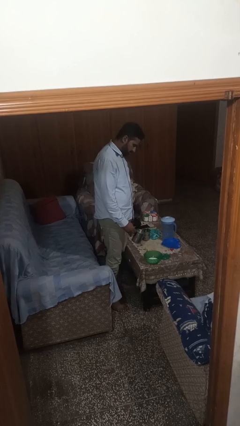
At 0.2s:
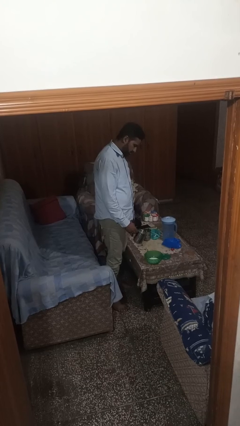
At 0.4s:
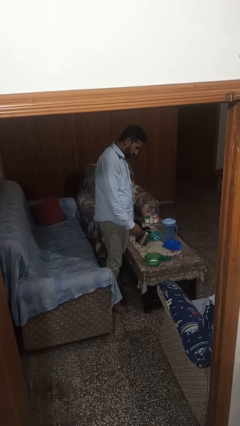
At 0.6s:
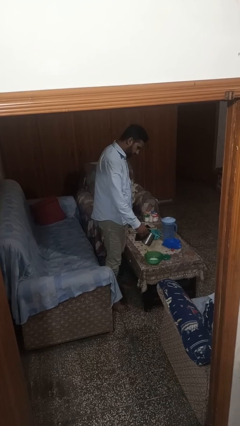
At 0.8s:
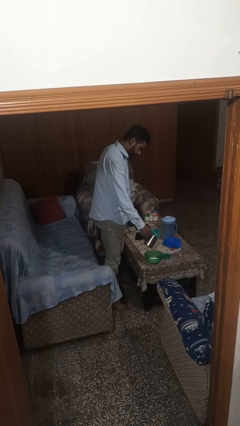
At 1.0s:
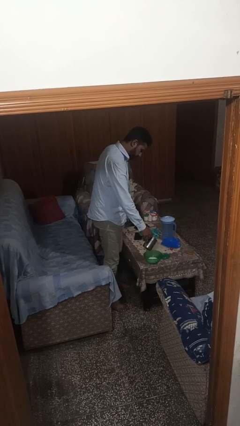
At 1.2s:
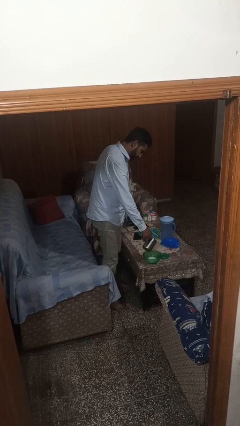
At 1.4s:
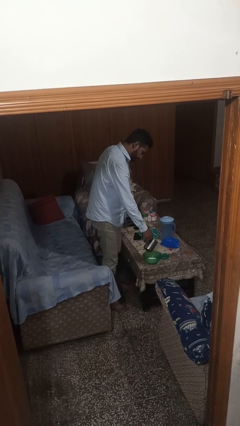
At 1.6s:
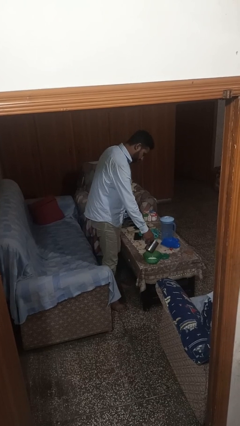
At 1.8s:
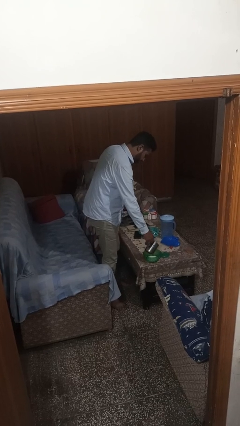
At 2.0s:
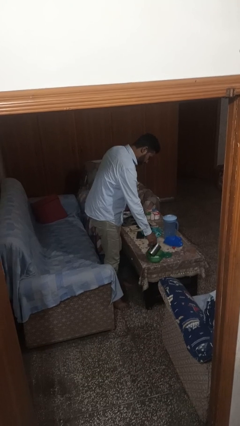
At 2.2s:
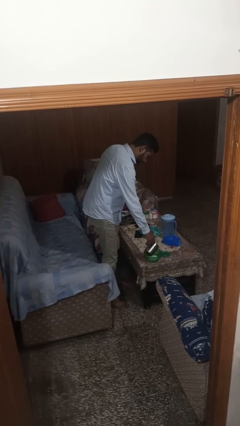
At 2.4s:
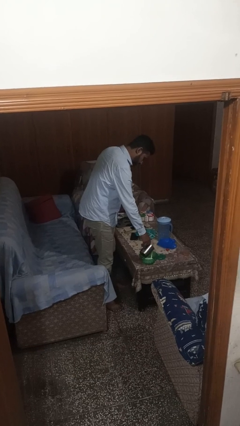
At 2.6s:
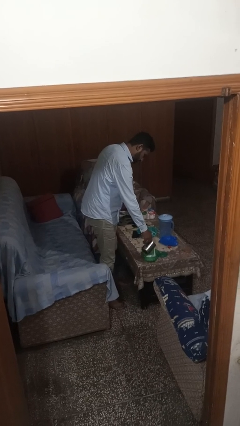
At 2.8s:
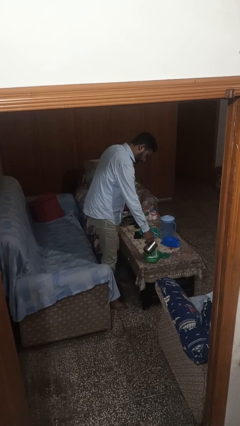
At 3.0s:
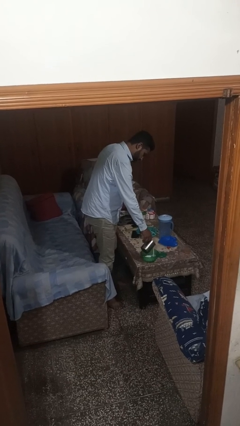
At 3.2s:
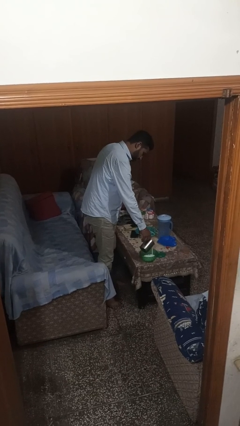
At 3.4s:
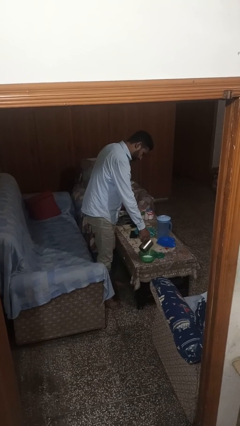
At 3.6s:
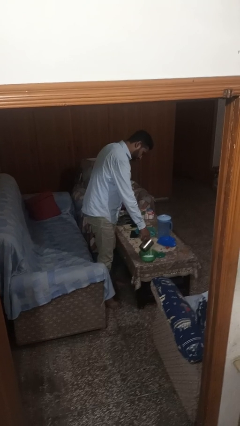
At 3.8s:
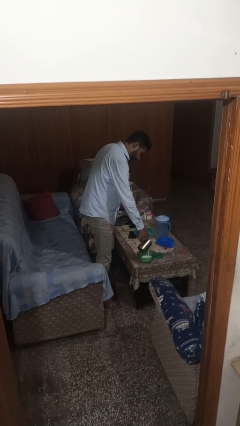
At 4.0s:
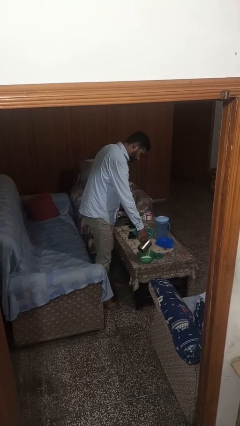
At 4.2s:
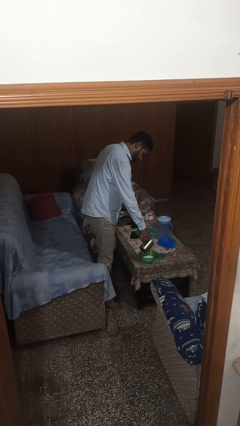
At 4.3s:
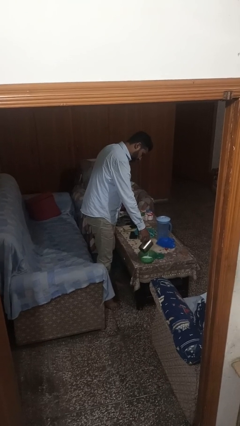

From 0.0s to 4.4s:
person pours into bowl

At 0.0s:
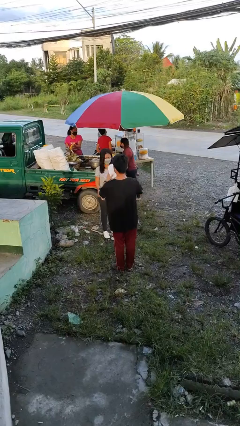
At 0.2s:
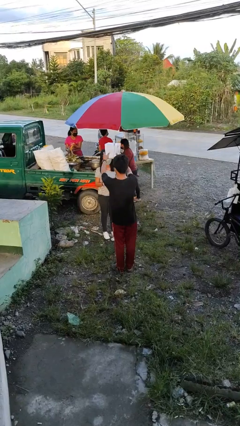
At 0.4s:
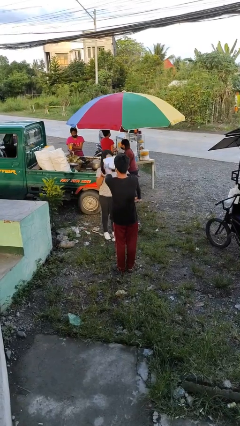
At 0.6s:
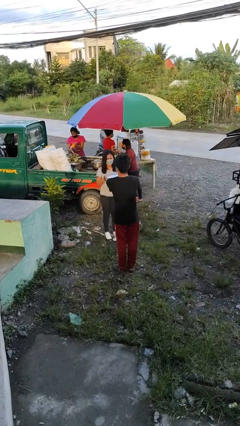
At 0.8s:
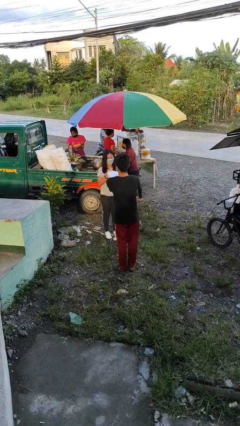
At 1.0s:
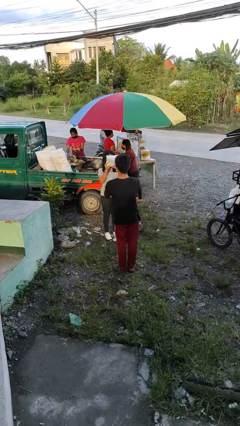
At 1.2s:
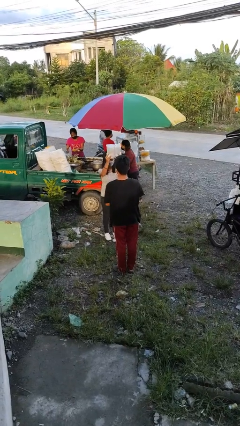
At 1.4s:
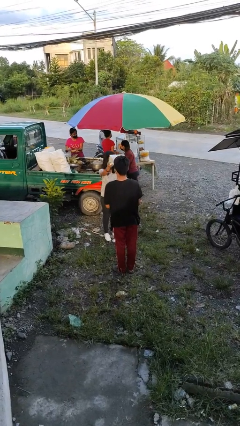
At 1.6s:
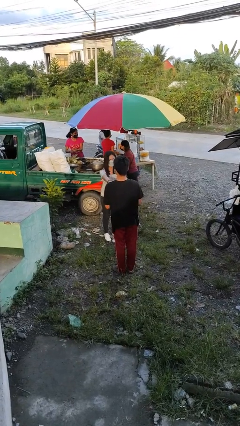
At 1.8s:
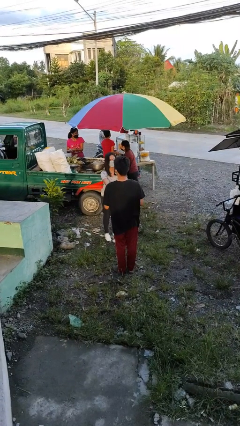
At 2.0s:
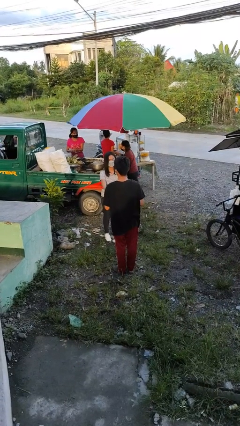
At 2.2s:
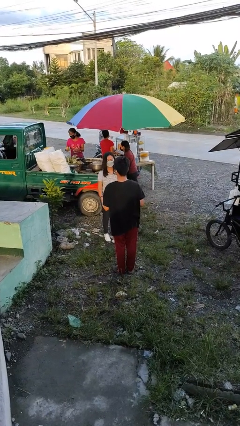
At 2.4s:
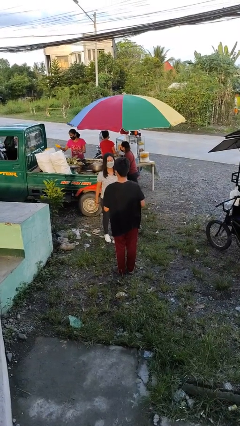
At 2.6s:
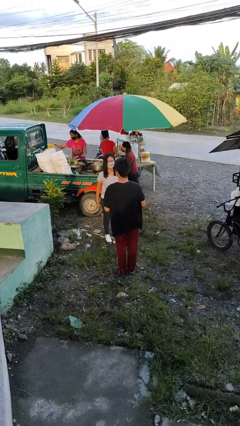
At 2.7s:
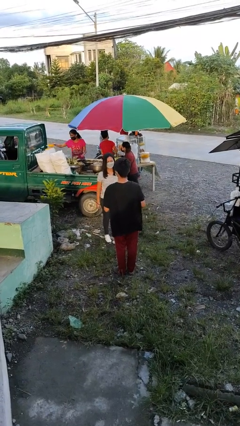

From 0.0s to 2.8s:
person transfers object to person

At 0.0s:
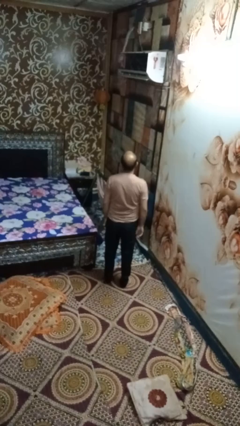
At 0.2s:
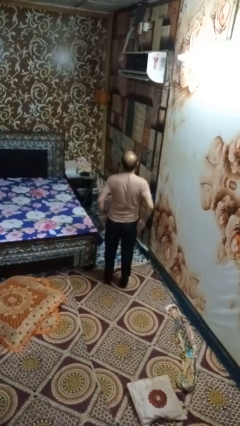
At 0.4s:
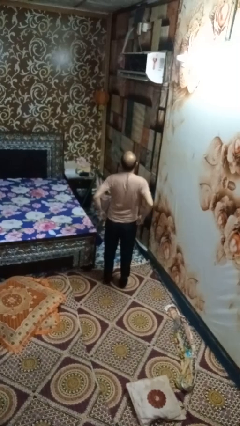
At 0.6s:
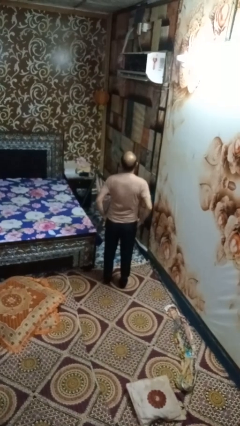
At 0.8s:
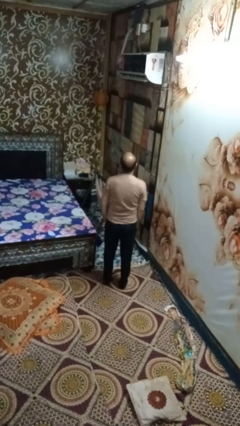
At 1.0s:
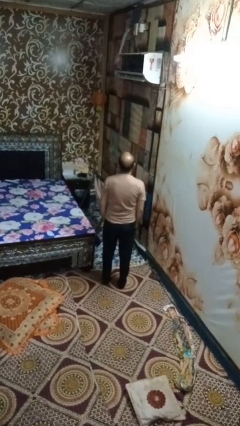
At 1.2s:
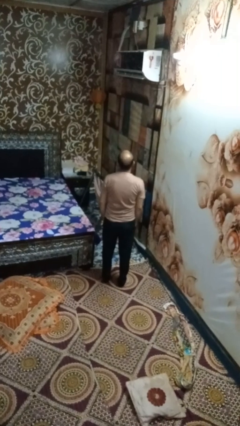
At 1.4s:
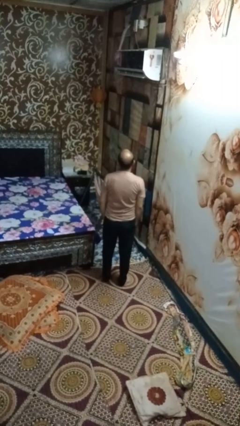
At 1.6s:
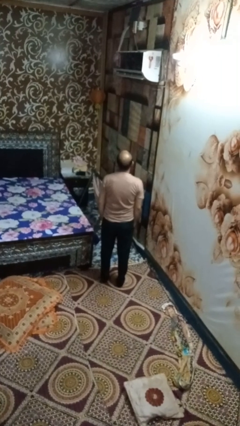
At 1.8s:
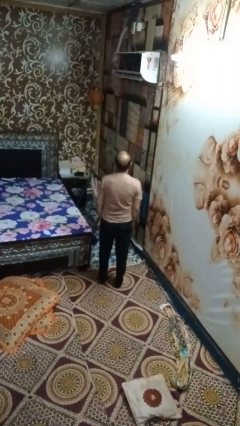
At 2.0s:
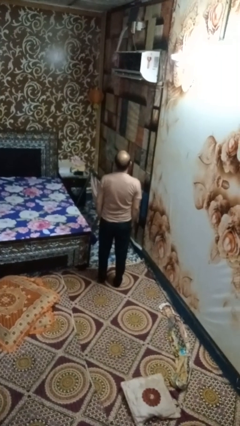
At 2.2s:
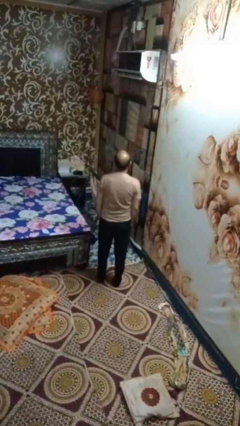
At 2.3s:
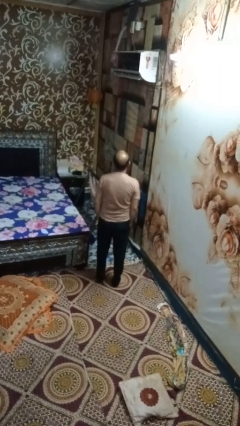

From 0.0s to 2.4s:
person puts hands in back pockets

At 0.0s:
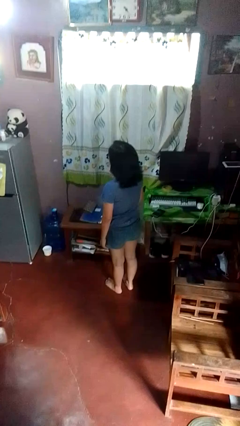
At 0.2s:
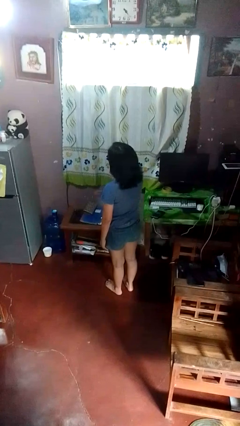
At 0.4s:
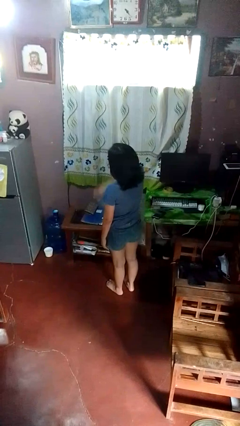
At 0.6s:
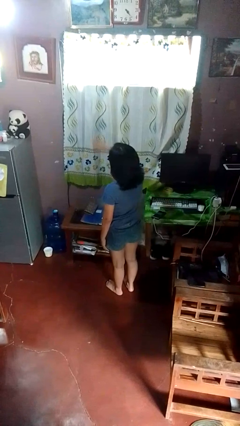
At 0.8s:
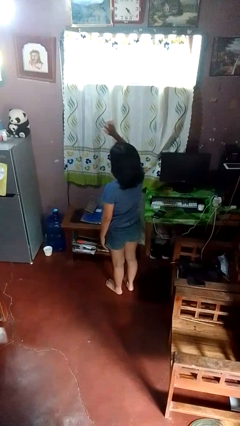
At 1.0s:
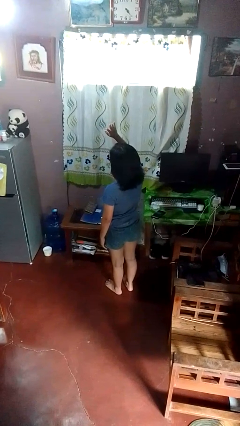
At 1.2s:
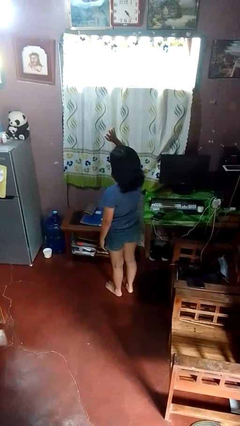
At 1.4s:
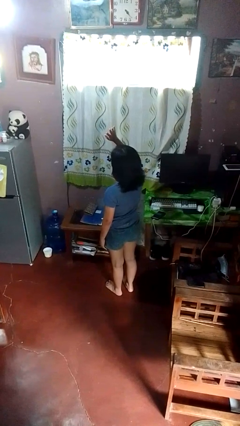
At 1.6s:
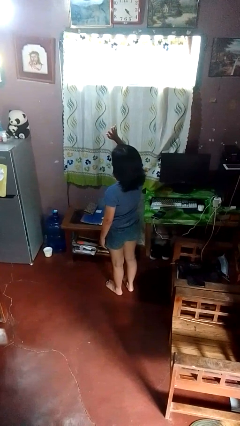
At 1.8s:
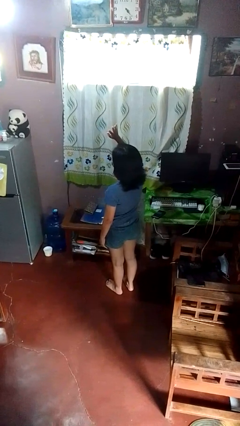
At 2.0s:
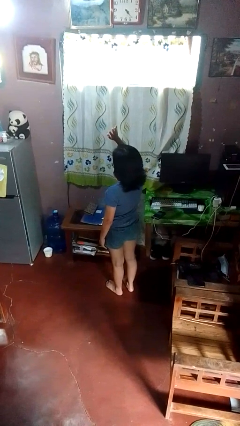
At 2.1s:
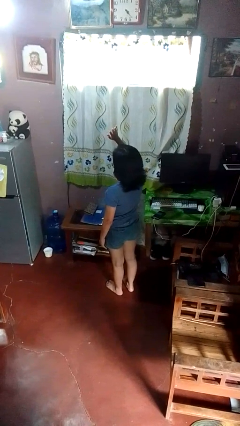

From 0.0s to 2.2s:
person gestures swipe up

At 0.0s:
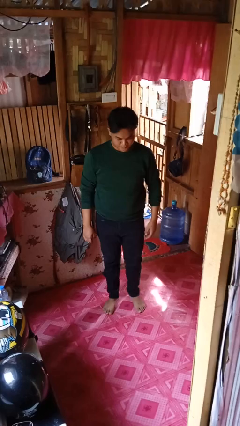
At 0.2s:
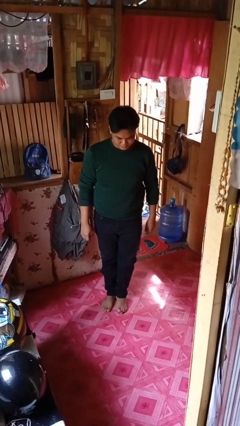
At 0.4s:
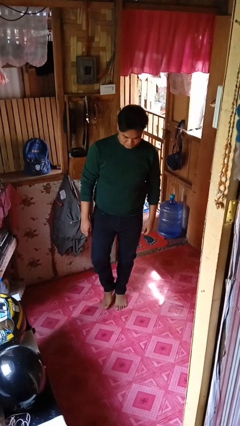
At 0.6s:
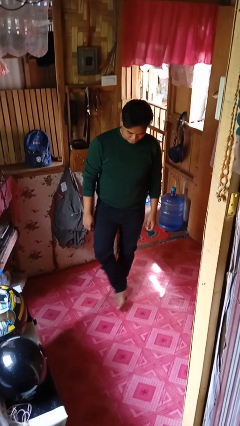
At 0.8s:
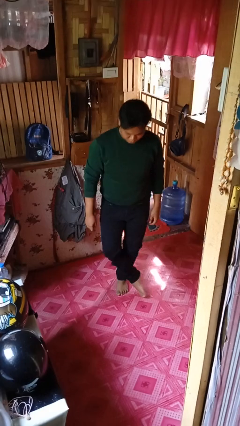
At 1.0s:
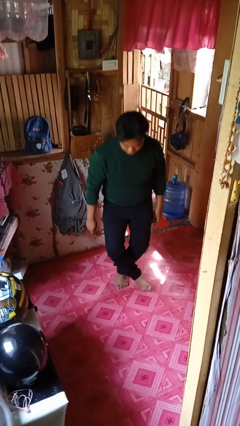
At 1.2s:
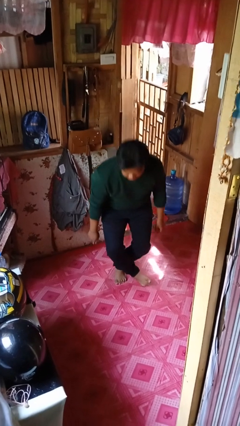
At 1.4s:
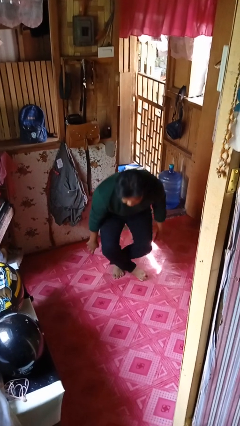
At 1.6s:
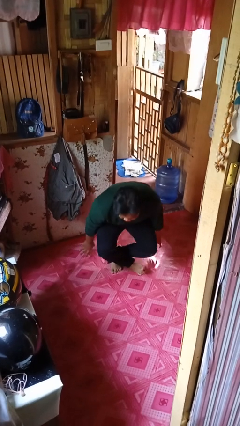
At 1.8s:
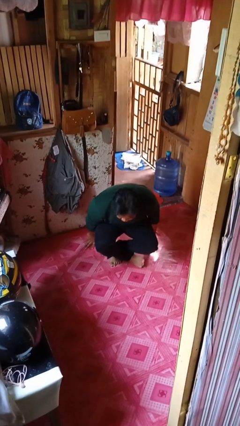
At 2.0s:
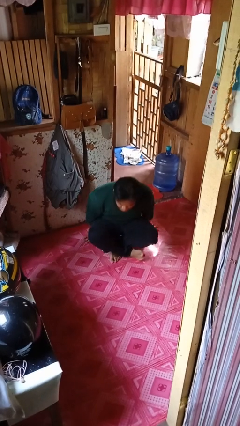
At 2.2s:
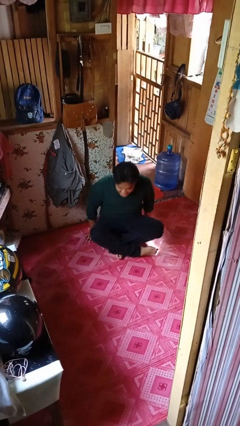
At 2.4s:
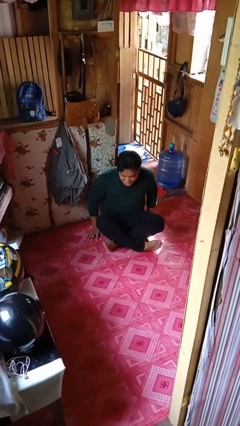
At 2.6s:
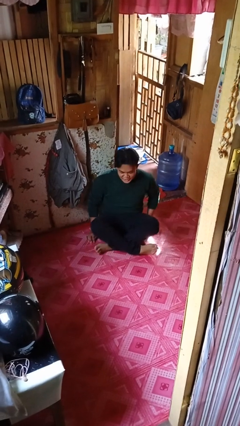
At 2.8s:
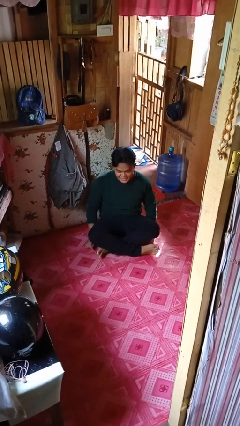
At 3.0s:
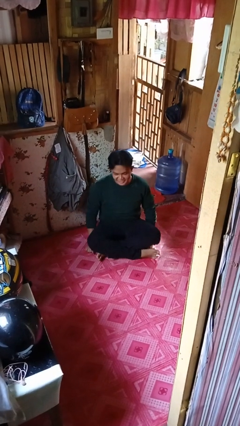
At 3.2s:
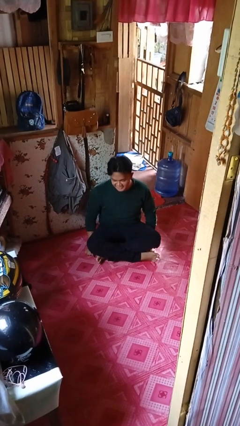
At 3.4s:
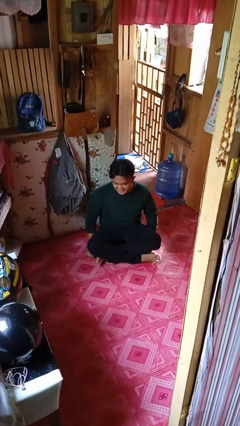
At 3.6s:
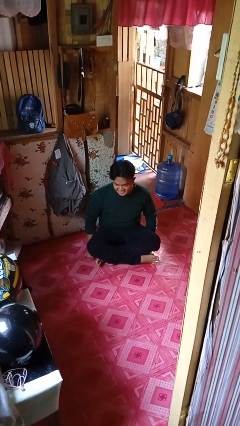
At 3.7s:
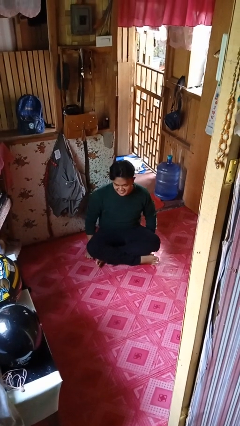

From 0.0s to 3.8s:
person sits crisscross

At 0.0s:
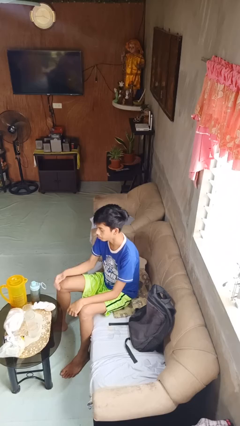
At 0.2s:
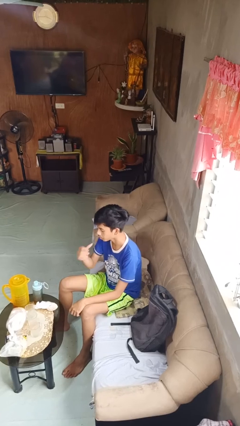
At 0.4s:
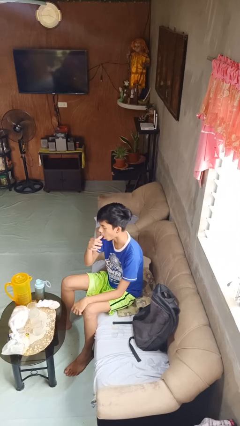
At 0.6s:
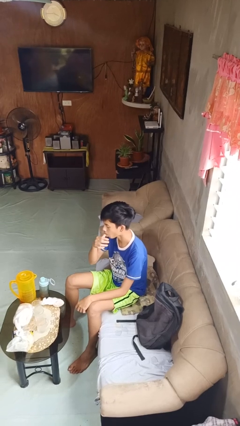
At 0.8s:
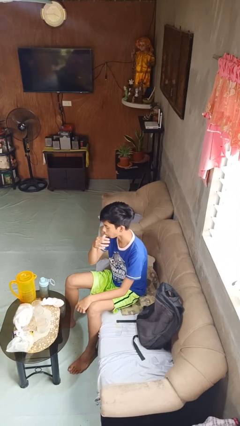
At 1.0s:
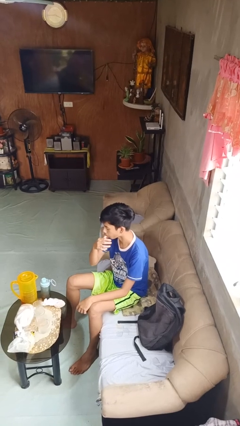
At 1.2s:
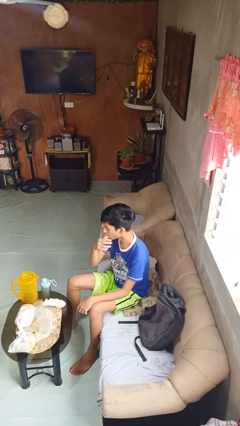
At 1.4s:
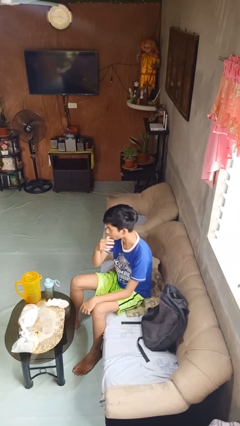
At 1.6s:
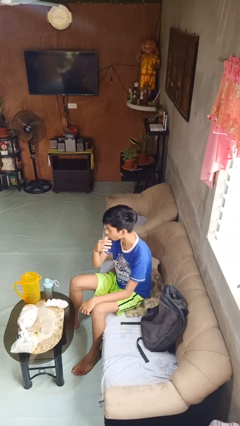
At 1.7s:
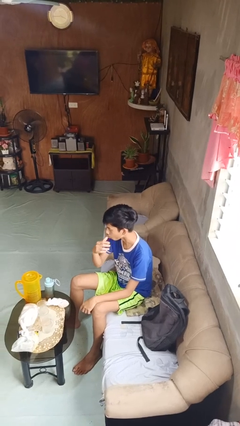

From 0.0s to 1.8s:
person licks fingers
